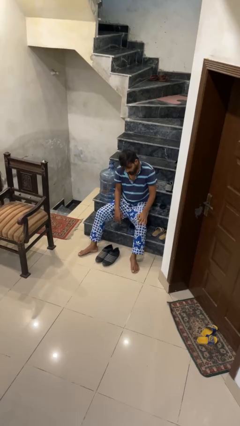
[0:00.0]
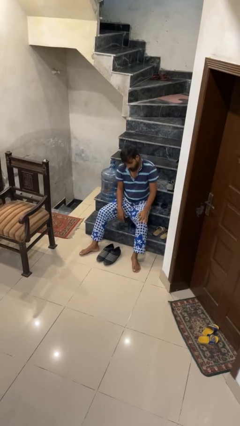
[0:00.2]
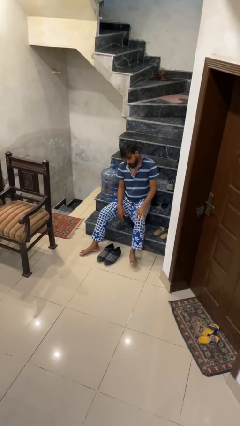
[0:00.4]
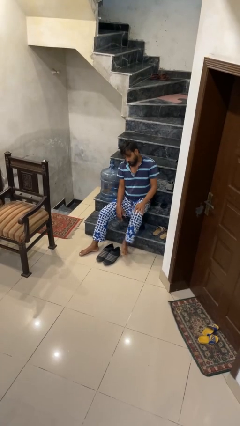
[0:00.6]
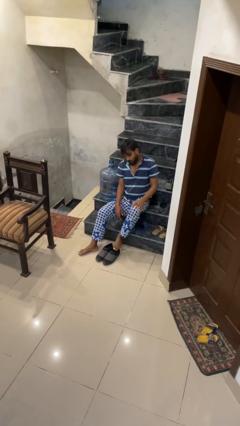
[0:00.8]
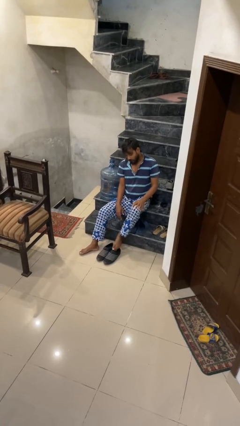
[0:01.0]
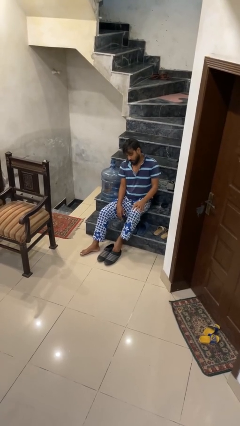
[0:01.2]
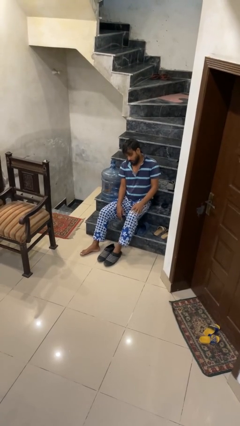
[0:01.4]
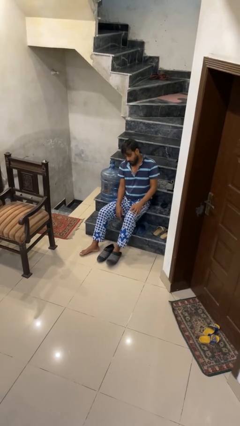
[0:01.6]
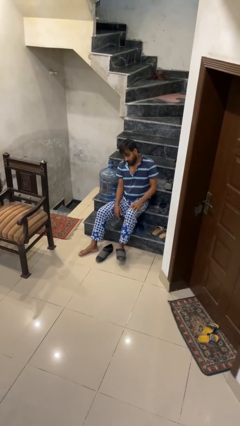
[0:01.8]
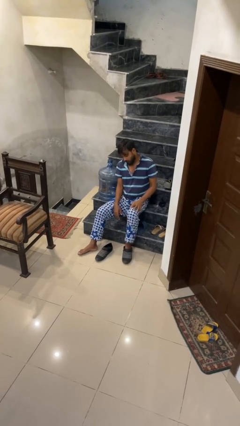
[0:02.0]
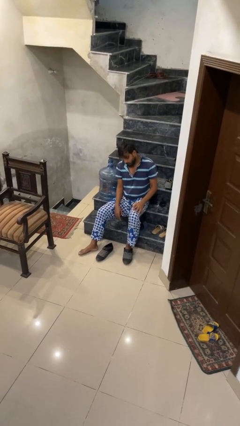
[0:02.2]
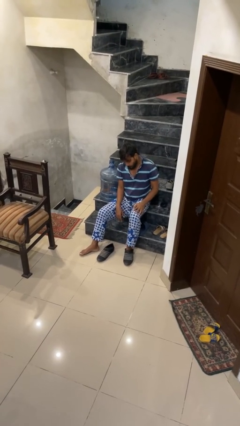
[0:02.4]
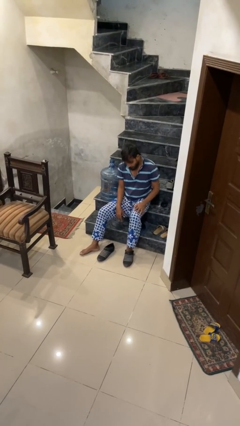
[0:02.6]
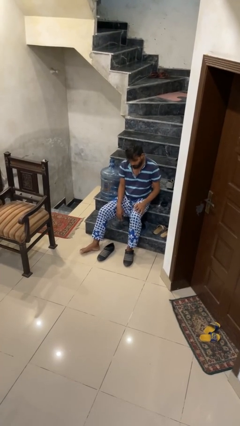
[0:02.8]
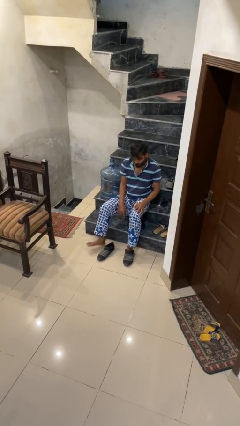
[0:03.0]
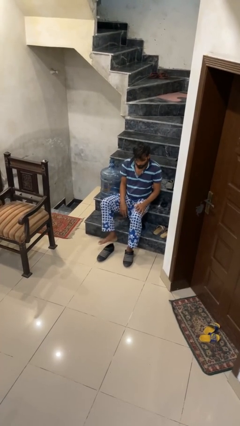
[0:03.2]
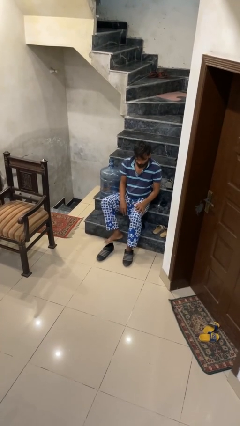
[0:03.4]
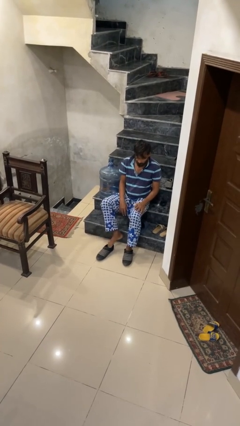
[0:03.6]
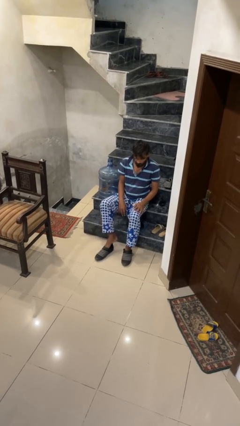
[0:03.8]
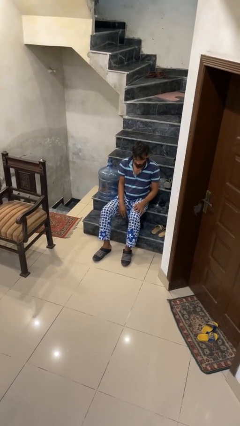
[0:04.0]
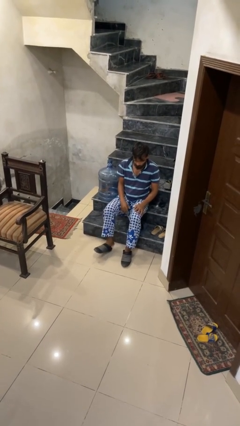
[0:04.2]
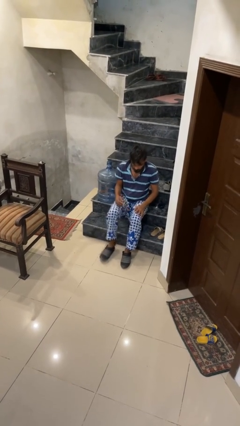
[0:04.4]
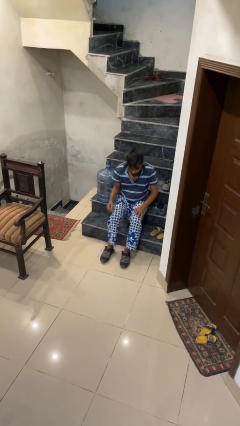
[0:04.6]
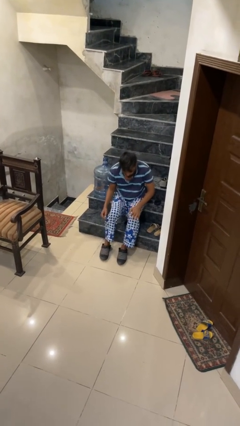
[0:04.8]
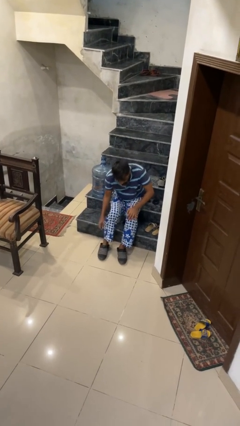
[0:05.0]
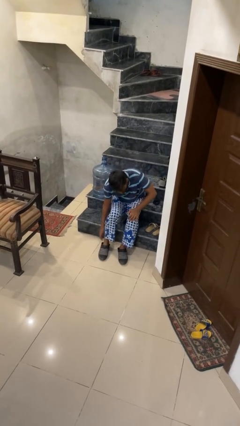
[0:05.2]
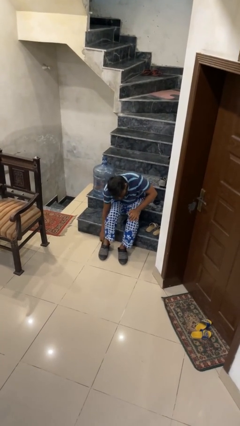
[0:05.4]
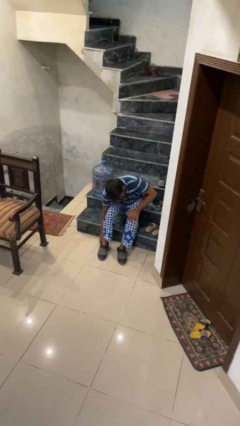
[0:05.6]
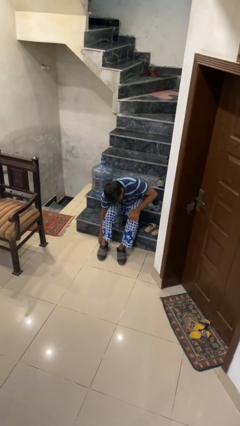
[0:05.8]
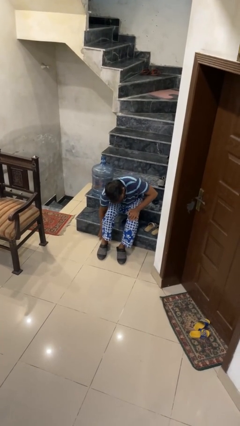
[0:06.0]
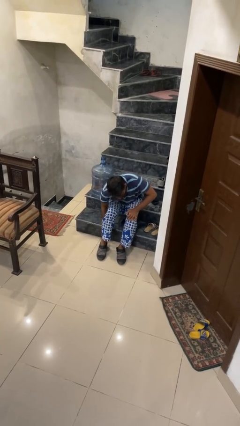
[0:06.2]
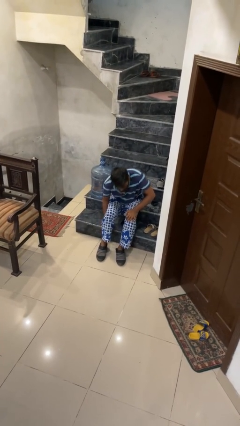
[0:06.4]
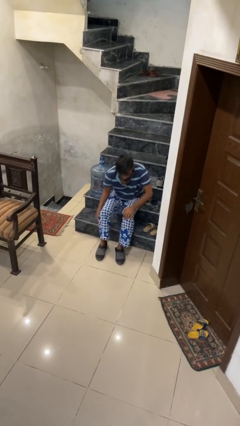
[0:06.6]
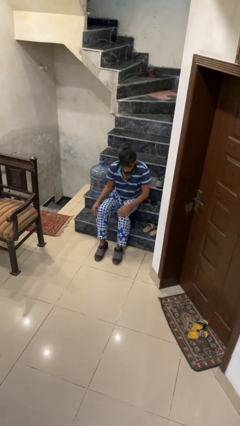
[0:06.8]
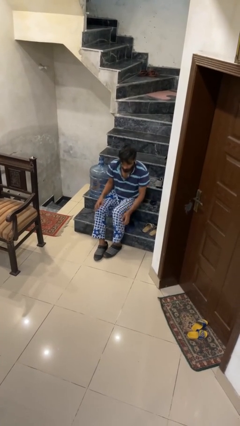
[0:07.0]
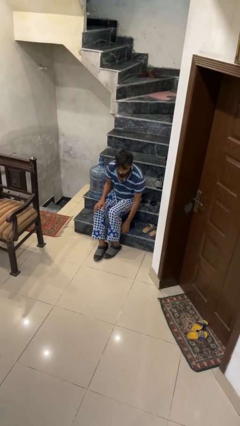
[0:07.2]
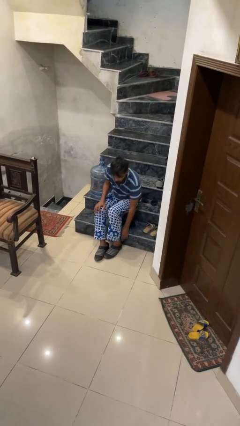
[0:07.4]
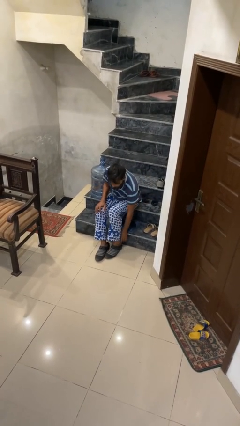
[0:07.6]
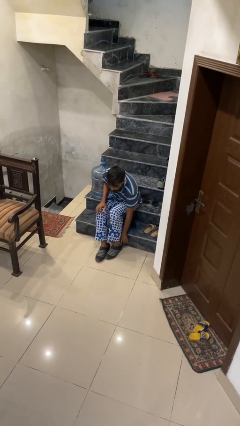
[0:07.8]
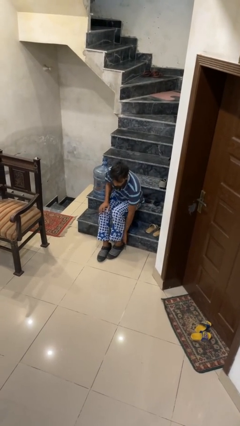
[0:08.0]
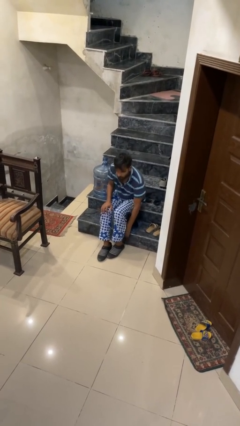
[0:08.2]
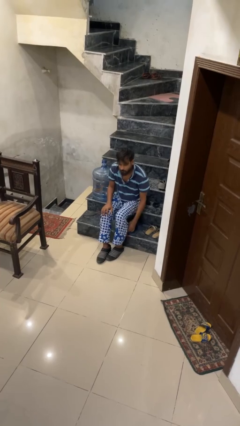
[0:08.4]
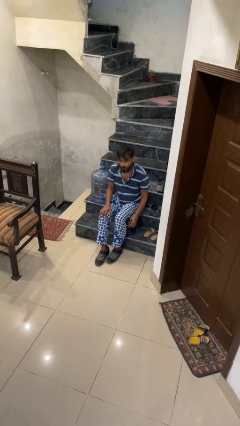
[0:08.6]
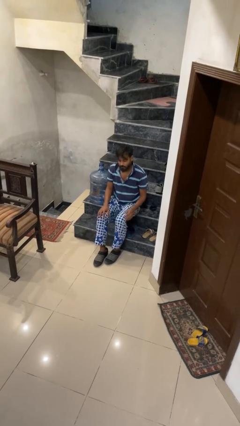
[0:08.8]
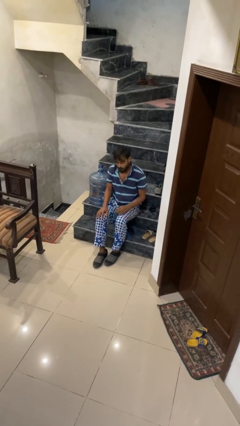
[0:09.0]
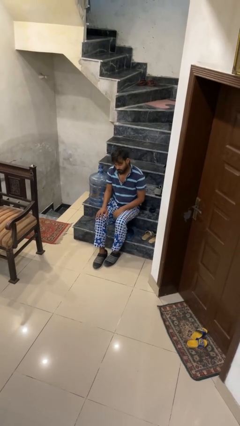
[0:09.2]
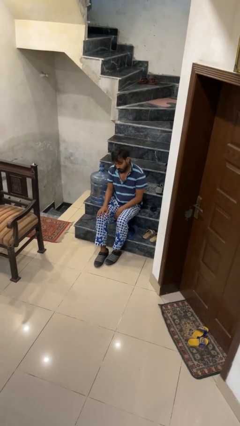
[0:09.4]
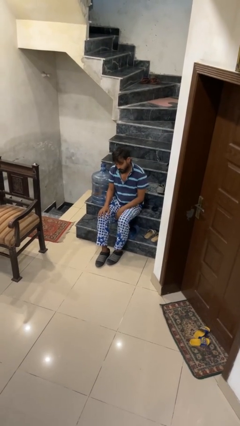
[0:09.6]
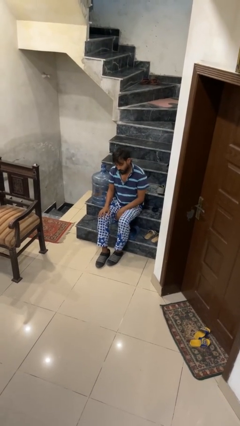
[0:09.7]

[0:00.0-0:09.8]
person puts on shoes

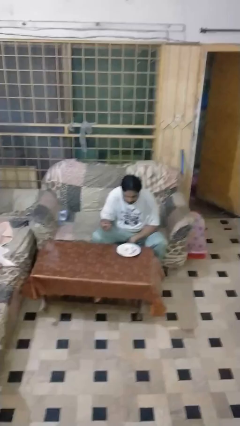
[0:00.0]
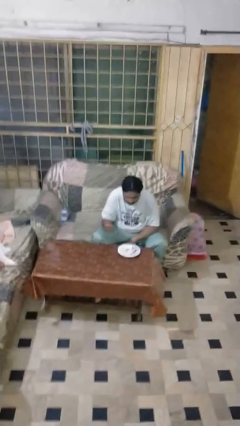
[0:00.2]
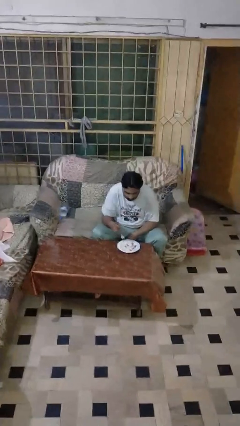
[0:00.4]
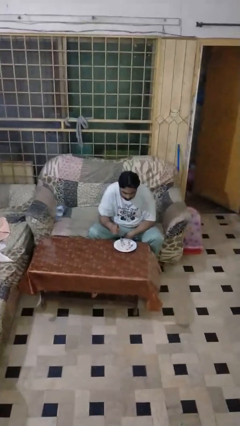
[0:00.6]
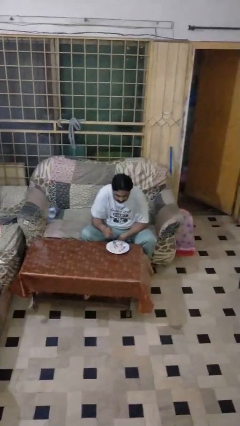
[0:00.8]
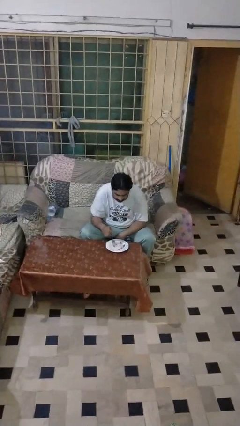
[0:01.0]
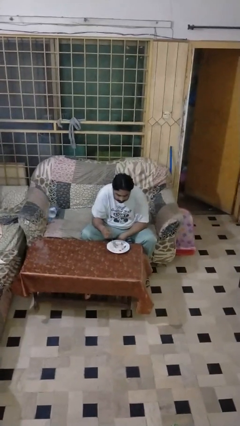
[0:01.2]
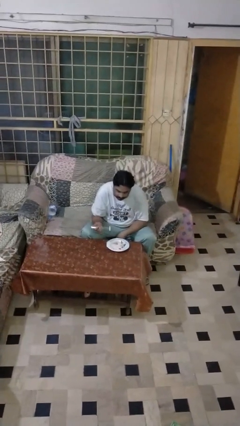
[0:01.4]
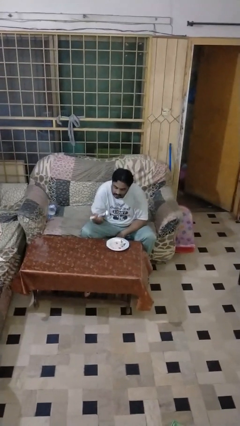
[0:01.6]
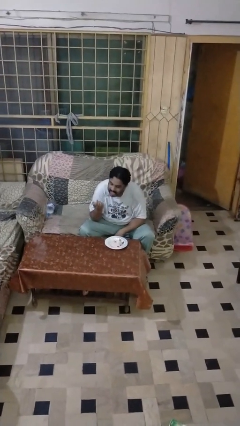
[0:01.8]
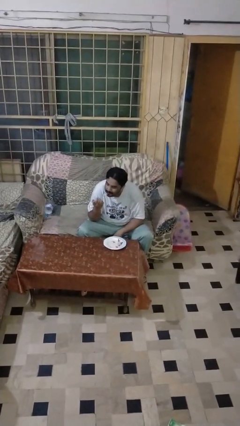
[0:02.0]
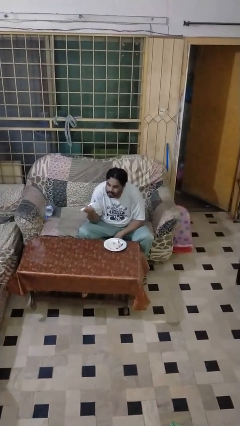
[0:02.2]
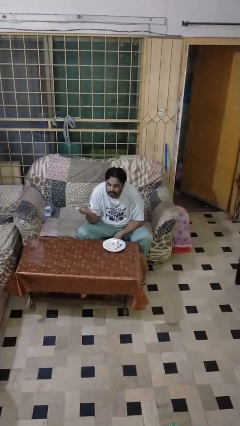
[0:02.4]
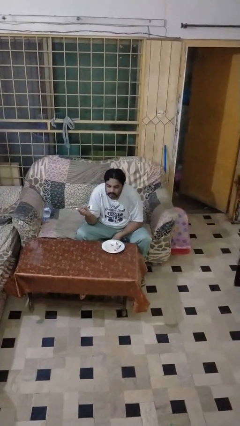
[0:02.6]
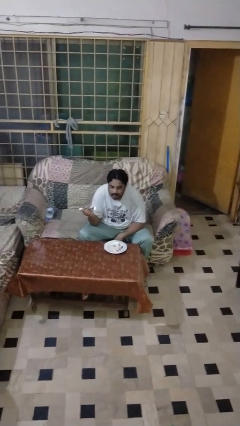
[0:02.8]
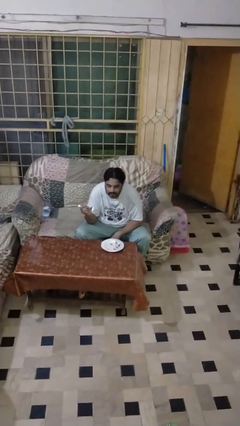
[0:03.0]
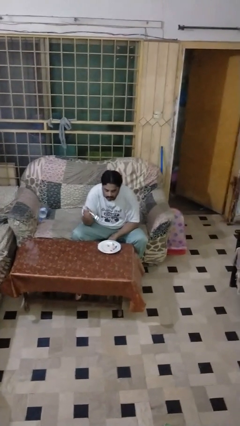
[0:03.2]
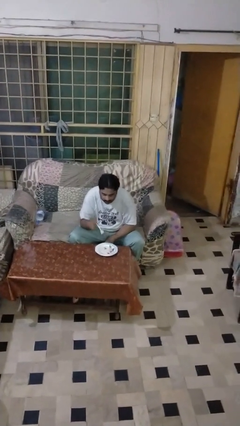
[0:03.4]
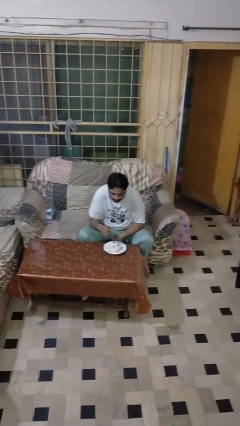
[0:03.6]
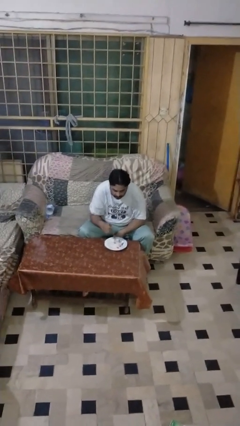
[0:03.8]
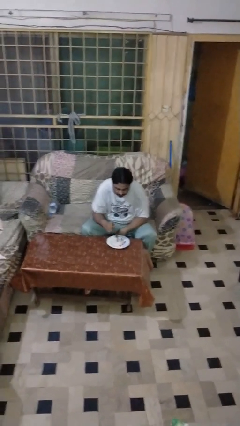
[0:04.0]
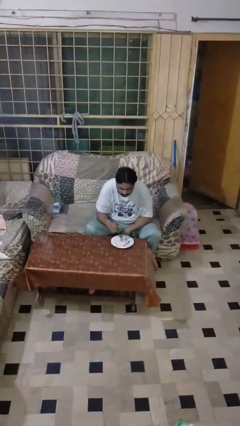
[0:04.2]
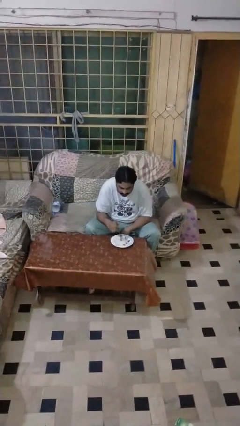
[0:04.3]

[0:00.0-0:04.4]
person eats with utensil

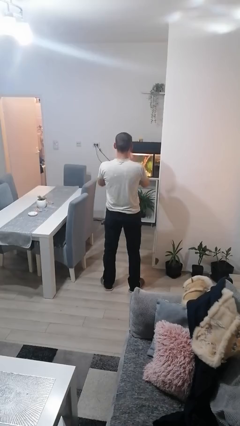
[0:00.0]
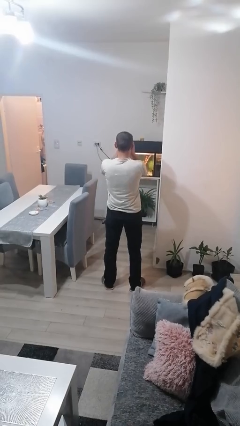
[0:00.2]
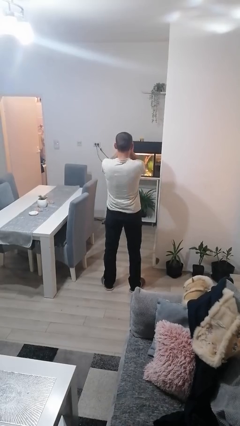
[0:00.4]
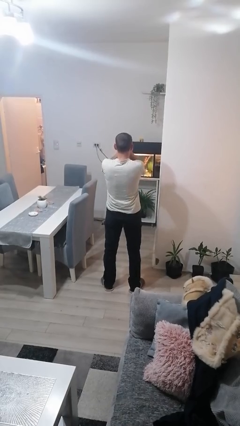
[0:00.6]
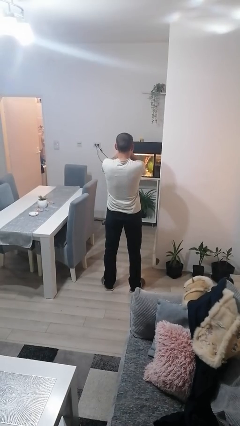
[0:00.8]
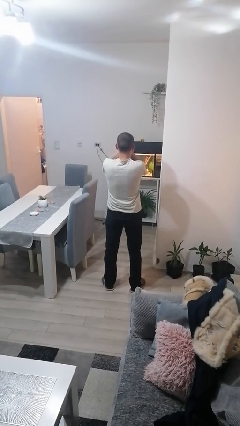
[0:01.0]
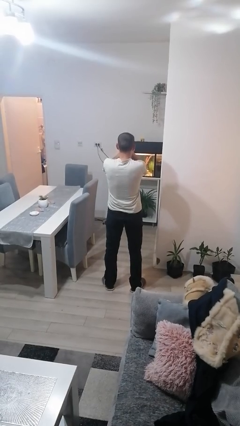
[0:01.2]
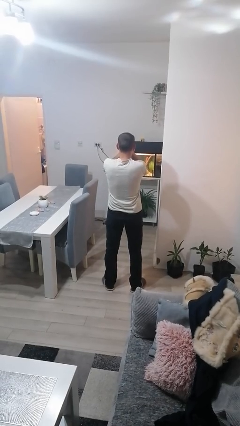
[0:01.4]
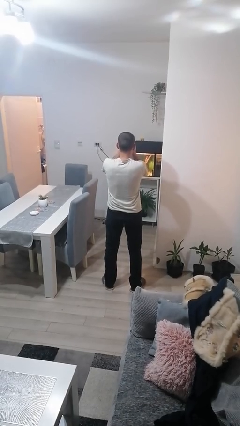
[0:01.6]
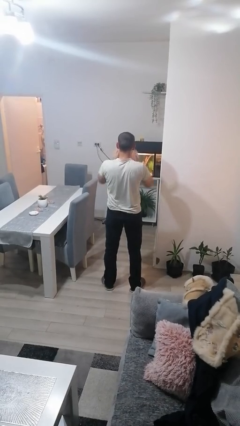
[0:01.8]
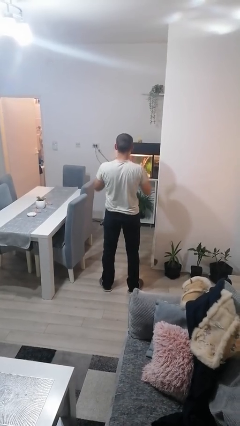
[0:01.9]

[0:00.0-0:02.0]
person covers face with hands

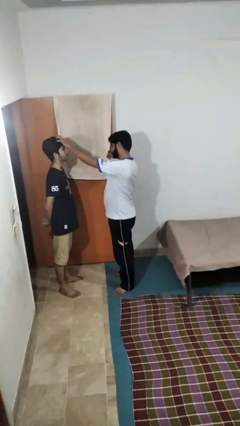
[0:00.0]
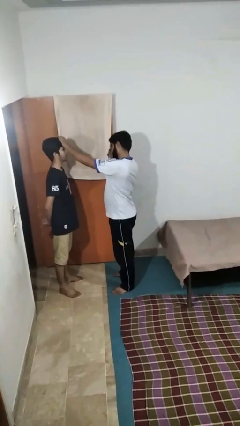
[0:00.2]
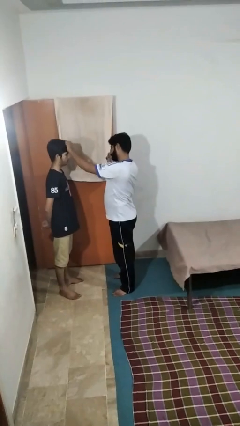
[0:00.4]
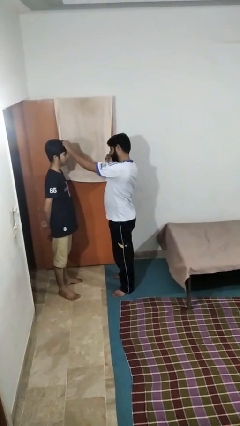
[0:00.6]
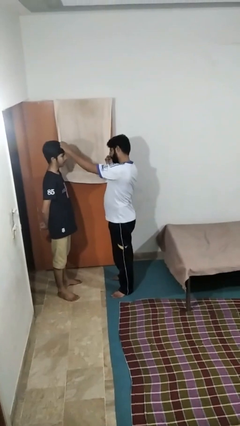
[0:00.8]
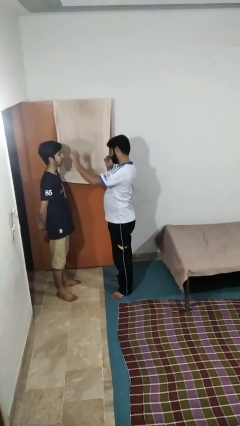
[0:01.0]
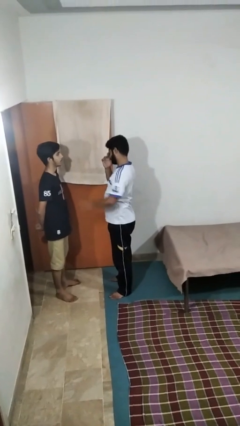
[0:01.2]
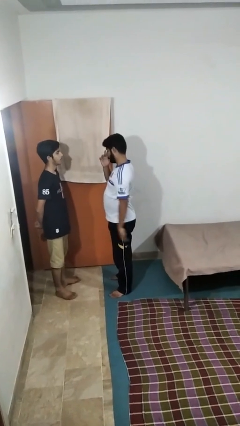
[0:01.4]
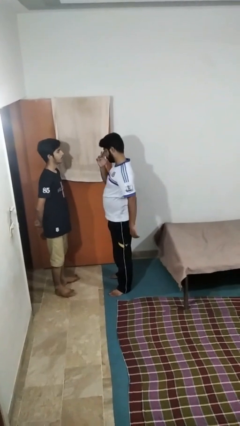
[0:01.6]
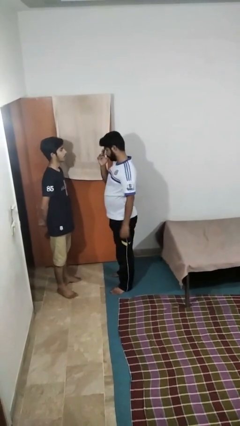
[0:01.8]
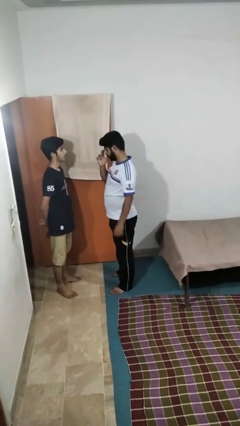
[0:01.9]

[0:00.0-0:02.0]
person grabs person by hair
